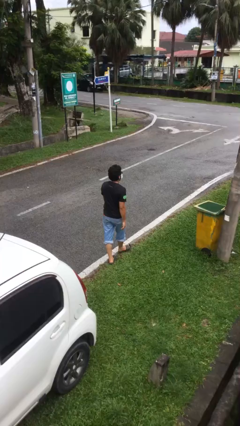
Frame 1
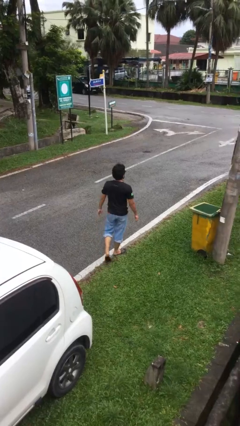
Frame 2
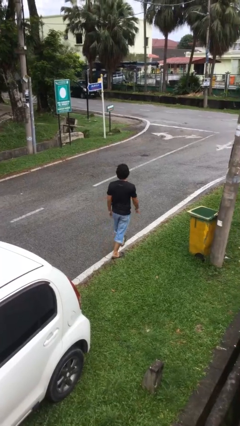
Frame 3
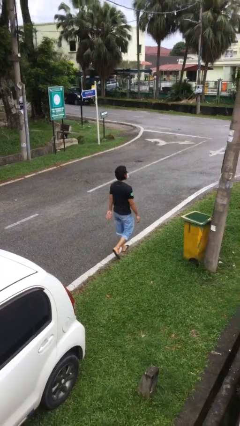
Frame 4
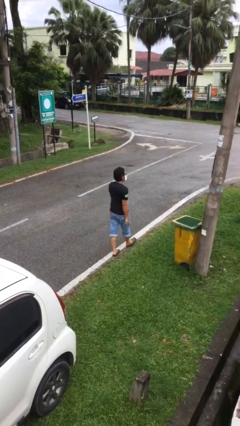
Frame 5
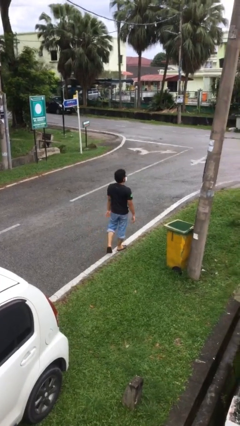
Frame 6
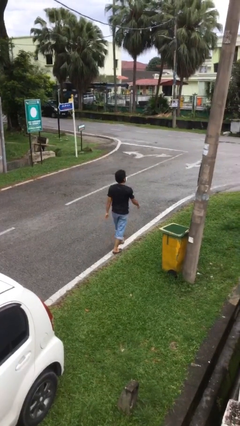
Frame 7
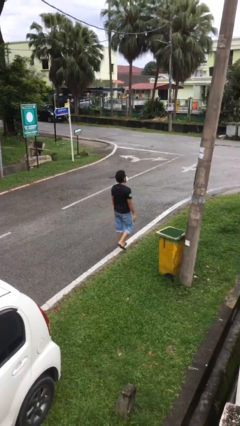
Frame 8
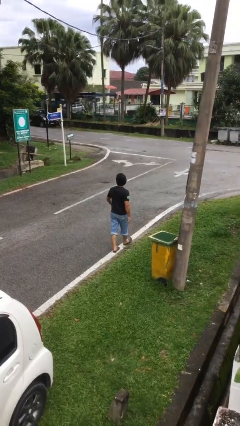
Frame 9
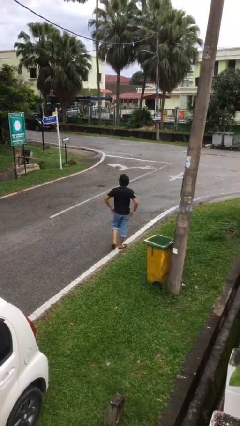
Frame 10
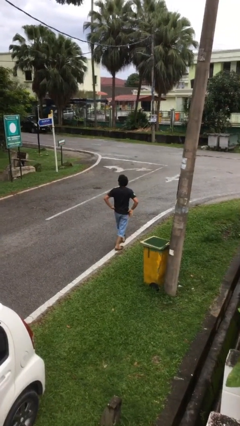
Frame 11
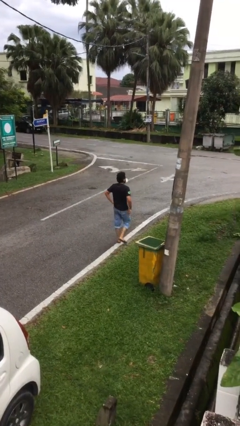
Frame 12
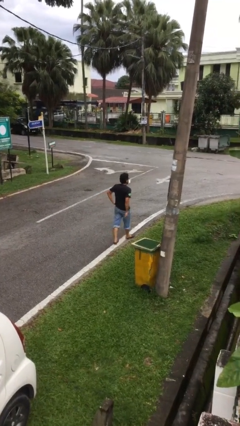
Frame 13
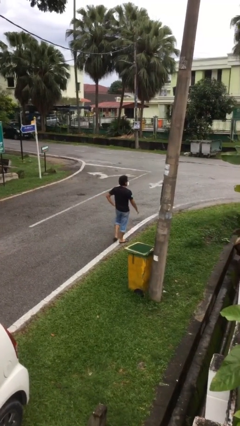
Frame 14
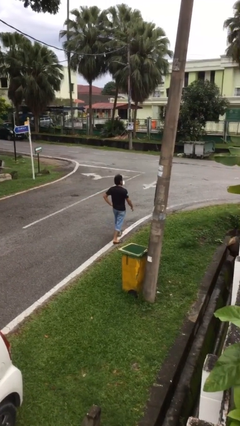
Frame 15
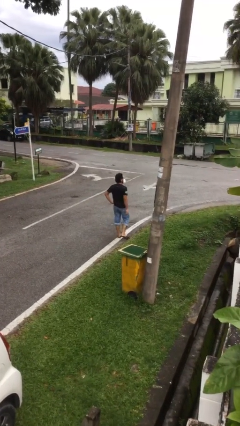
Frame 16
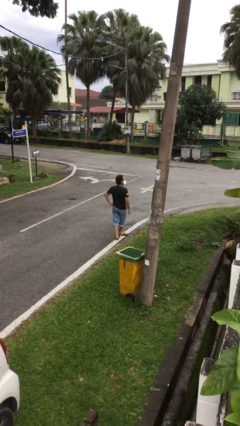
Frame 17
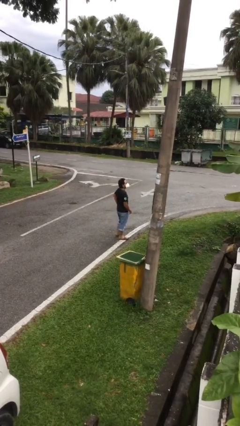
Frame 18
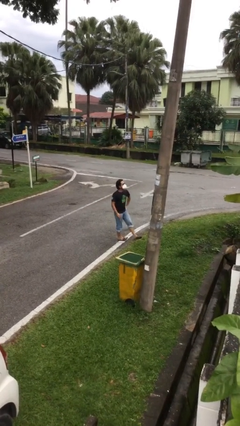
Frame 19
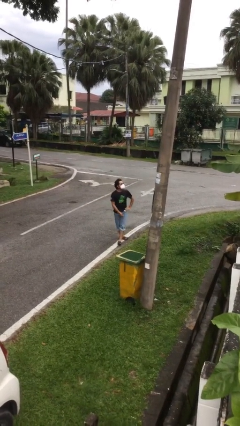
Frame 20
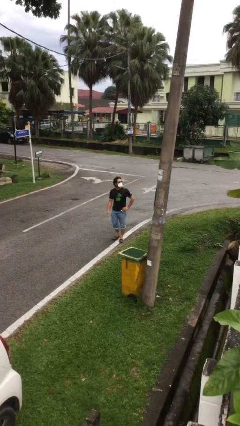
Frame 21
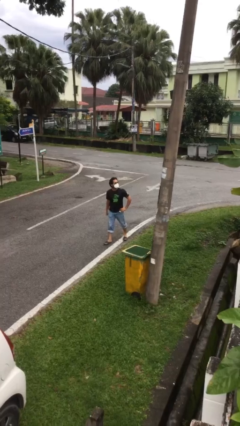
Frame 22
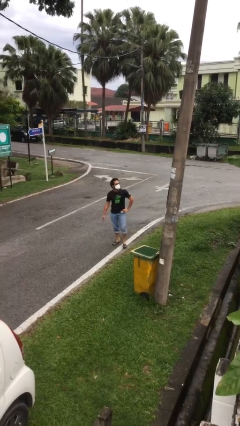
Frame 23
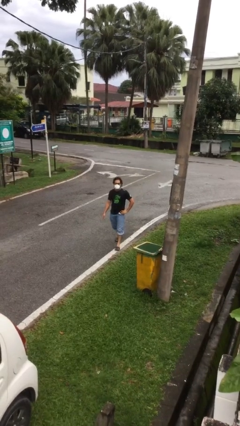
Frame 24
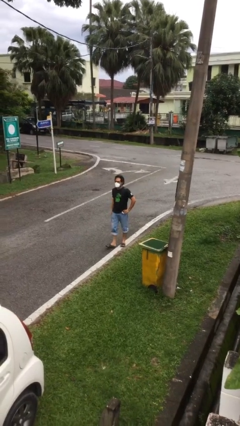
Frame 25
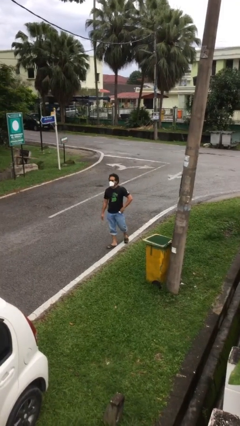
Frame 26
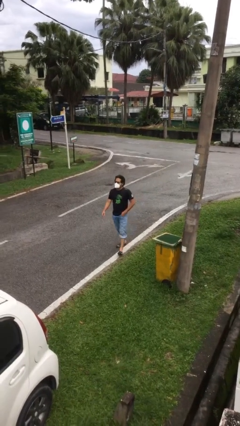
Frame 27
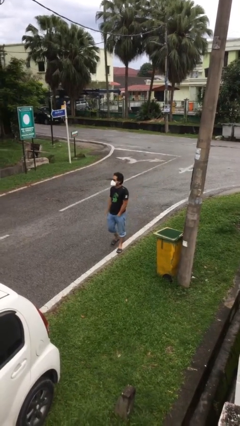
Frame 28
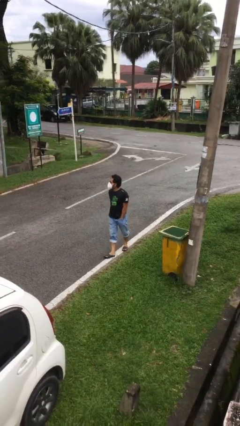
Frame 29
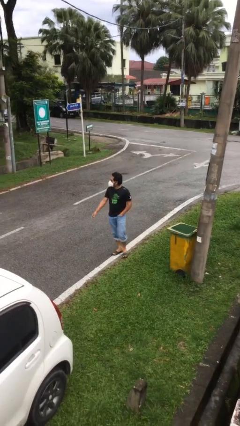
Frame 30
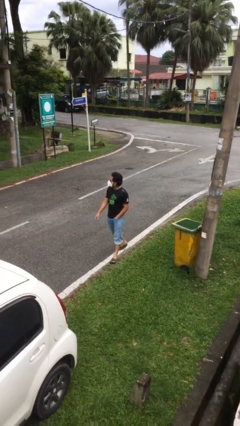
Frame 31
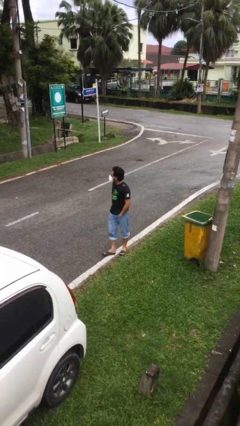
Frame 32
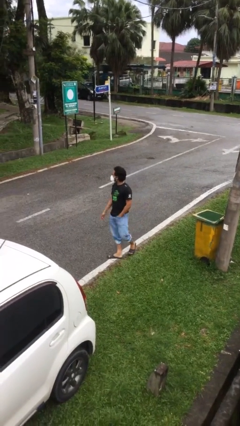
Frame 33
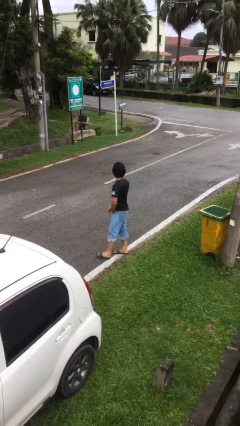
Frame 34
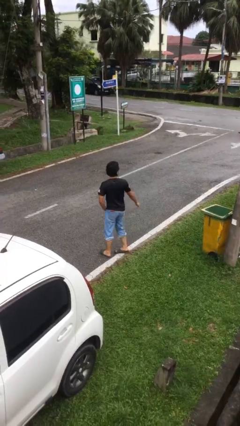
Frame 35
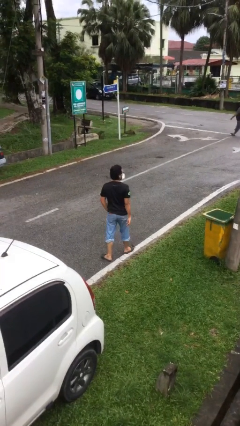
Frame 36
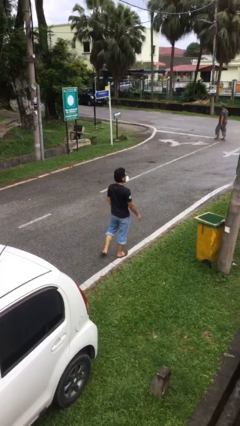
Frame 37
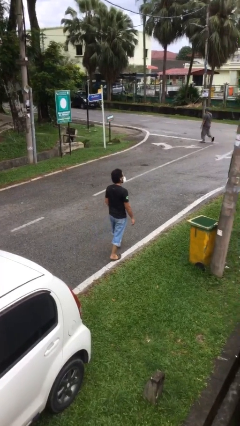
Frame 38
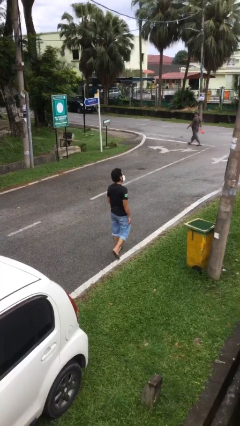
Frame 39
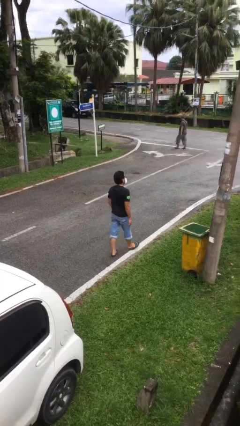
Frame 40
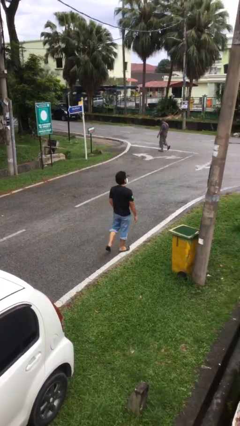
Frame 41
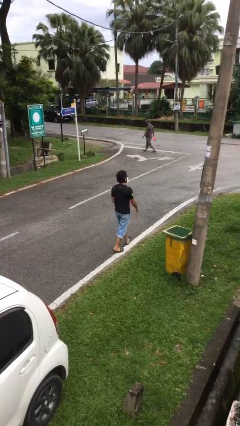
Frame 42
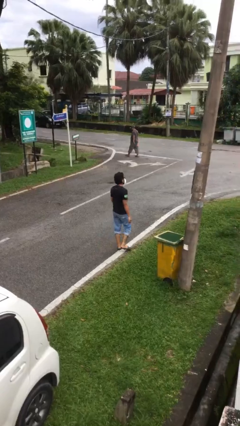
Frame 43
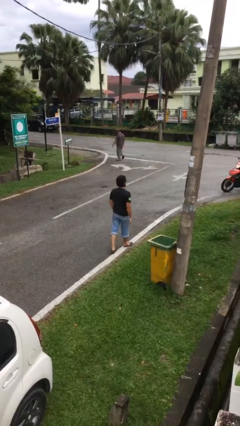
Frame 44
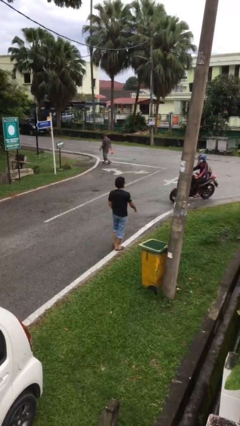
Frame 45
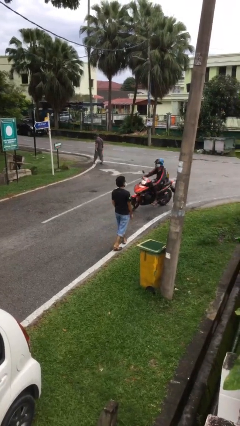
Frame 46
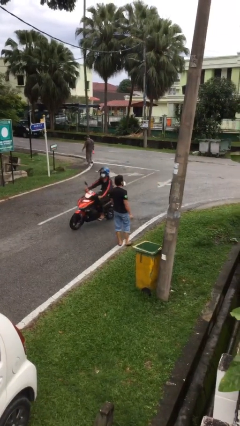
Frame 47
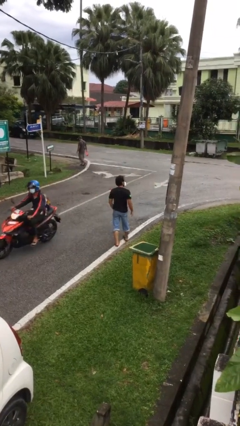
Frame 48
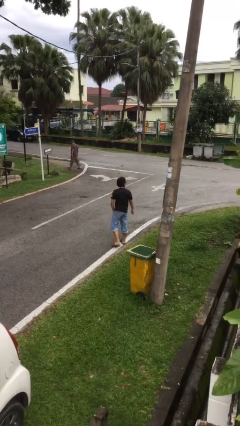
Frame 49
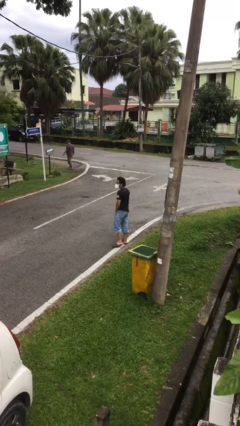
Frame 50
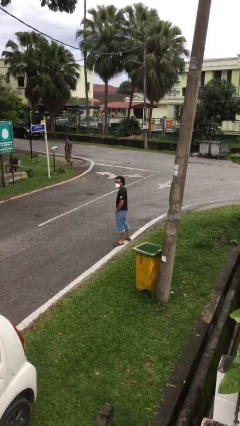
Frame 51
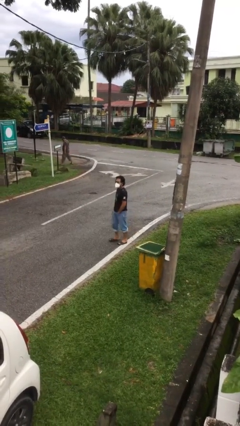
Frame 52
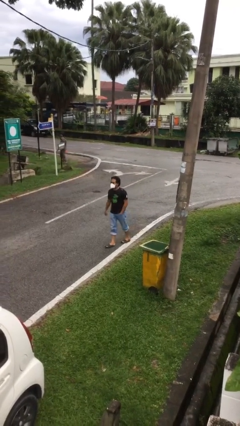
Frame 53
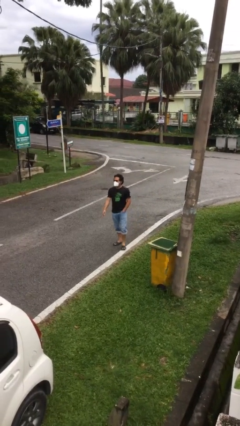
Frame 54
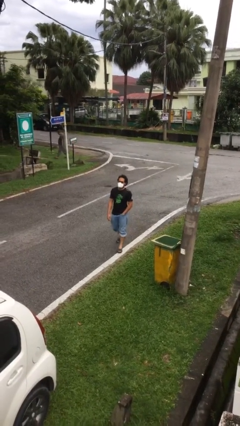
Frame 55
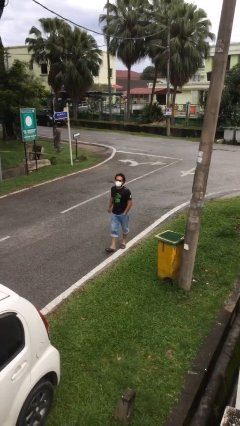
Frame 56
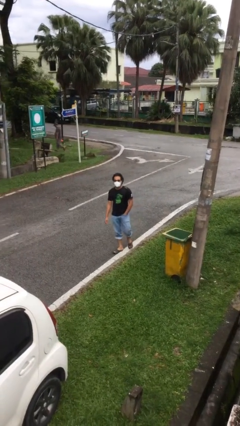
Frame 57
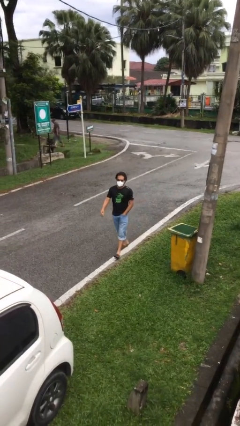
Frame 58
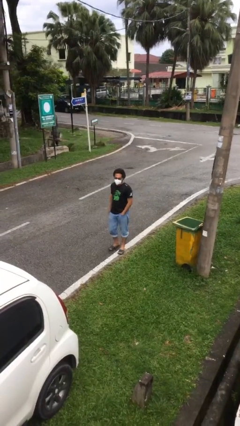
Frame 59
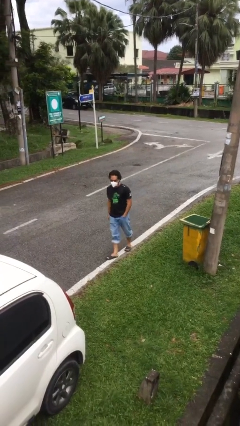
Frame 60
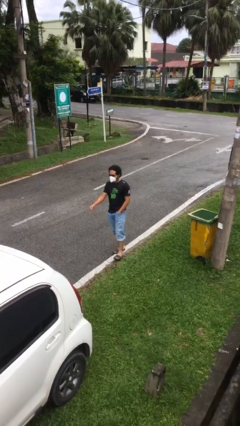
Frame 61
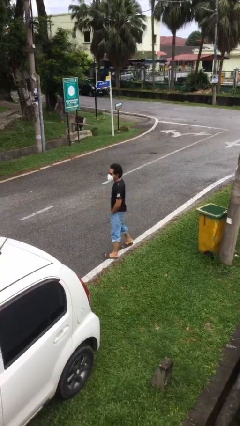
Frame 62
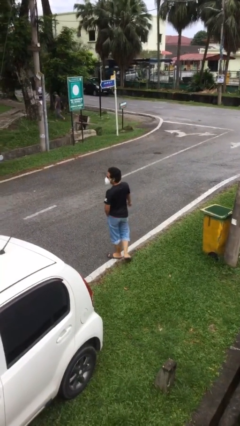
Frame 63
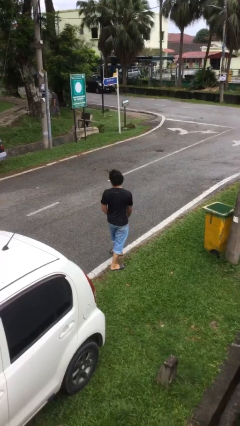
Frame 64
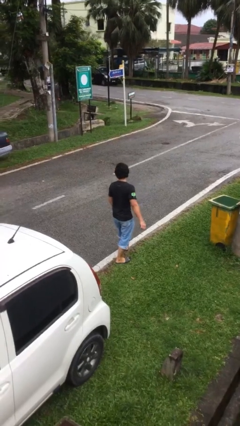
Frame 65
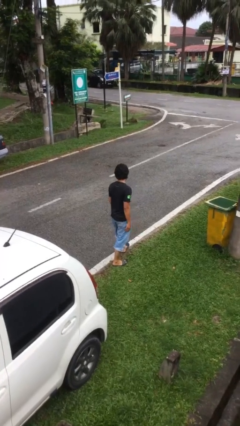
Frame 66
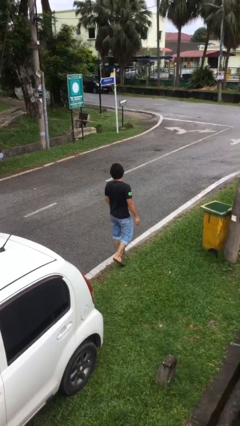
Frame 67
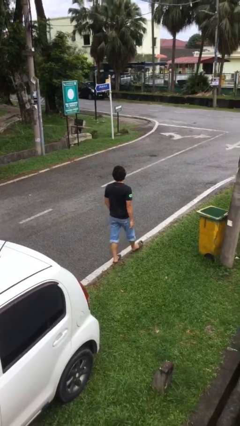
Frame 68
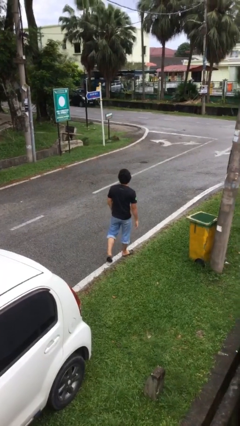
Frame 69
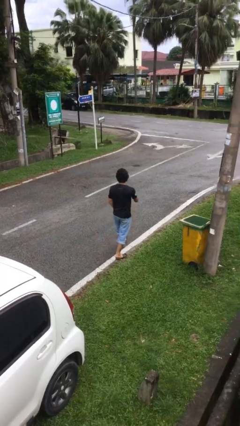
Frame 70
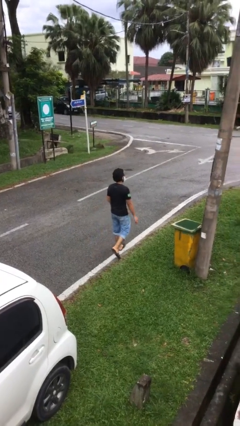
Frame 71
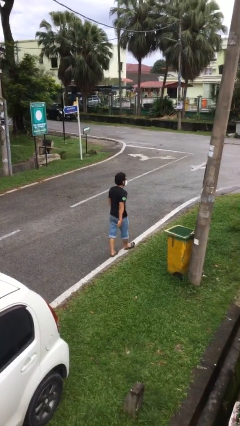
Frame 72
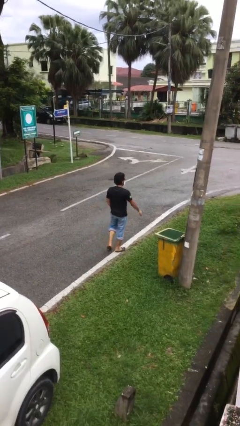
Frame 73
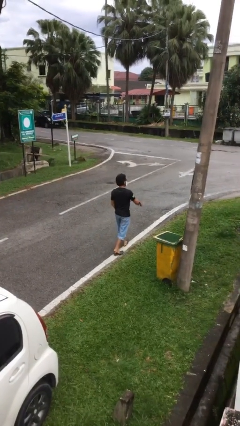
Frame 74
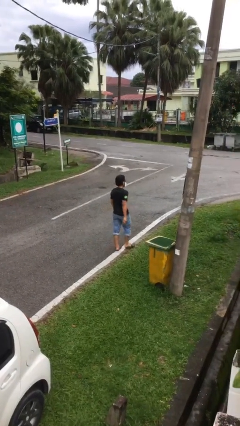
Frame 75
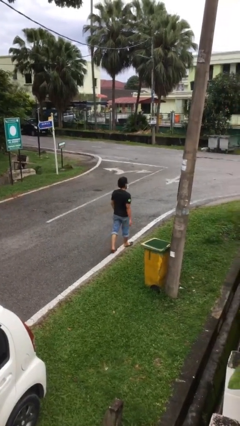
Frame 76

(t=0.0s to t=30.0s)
person walks

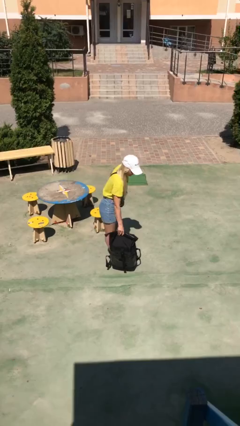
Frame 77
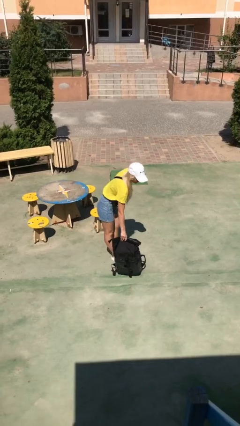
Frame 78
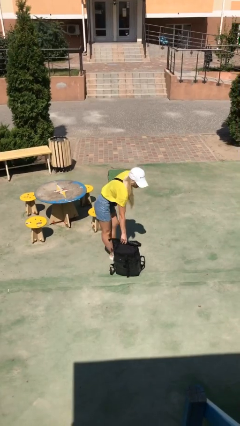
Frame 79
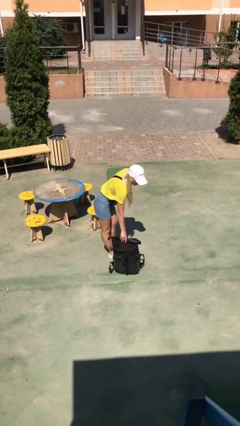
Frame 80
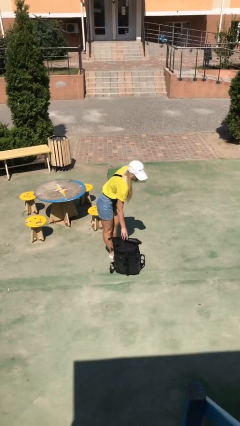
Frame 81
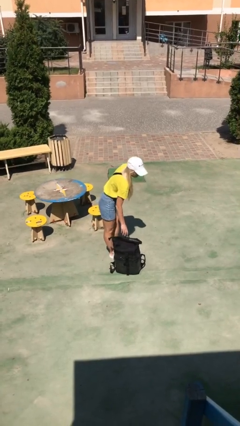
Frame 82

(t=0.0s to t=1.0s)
person puts down object on floor

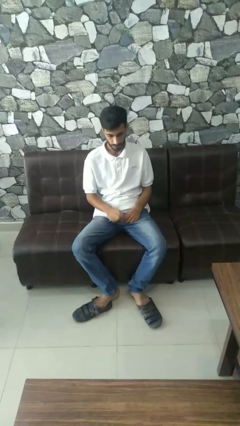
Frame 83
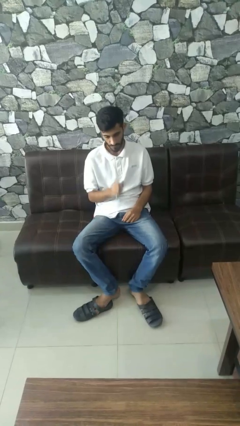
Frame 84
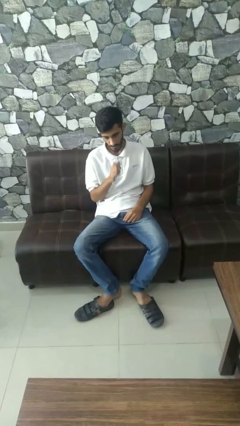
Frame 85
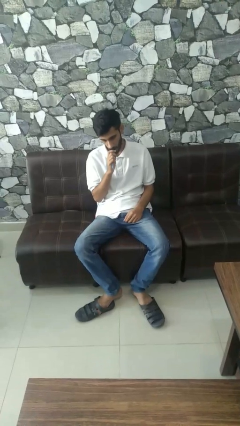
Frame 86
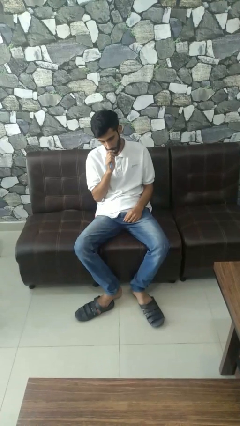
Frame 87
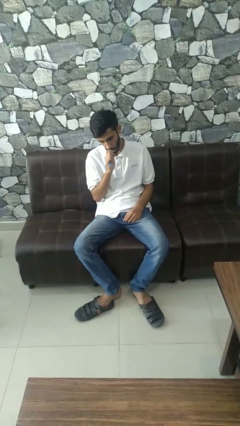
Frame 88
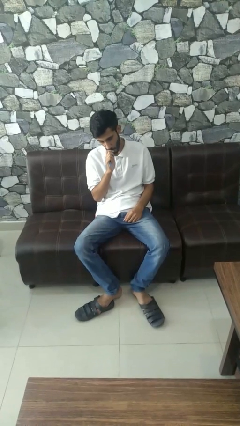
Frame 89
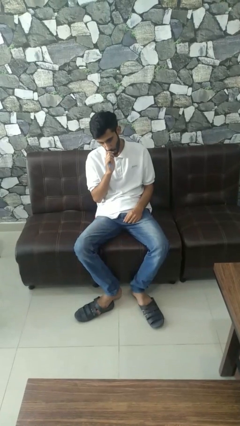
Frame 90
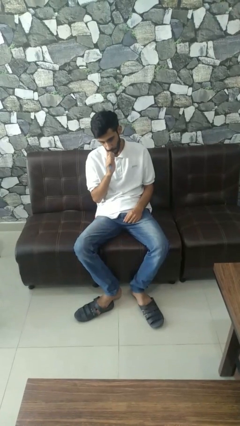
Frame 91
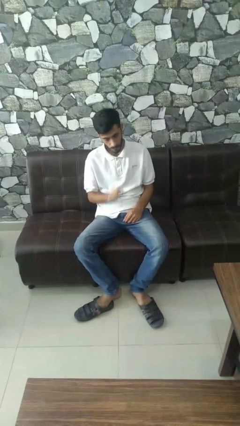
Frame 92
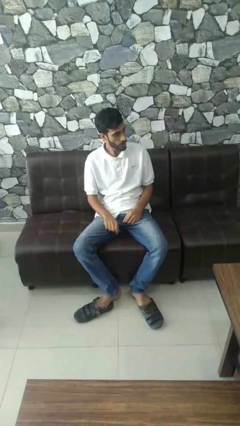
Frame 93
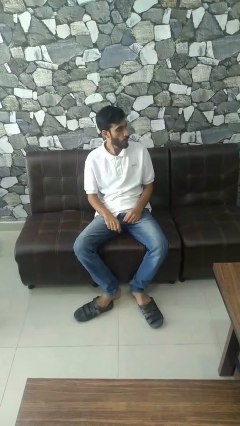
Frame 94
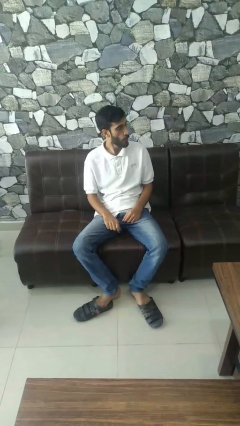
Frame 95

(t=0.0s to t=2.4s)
person vapes
